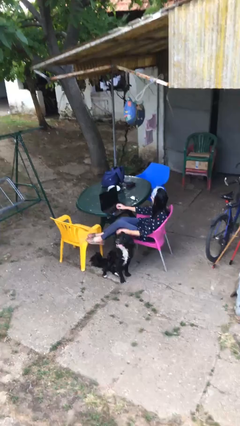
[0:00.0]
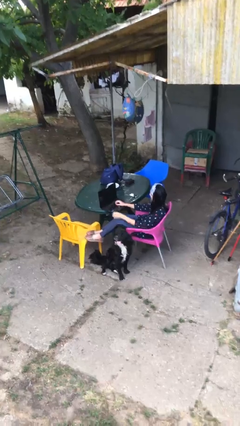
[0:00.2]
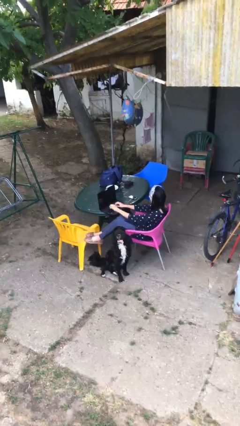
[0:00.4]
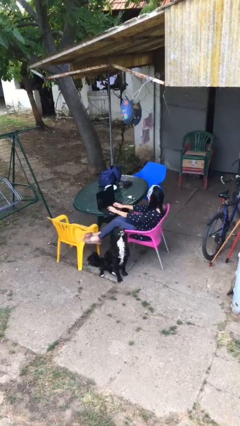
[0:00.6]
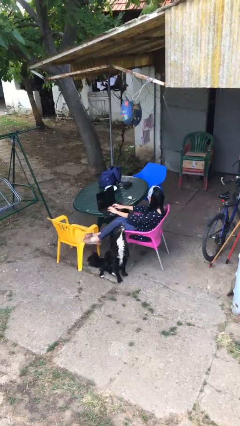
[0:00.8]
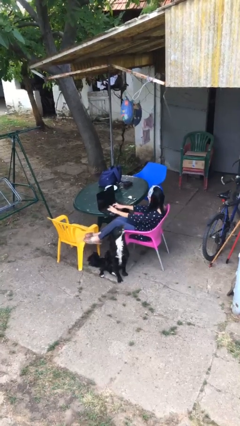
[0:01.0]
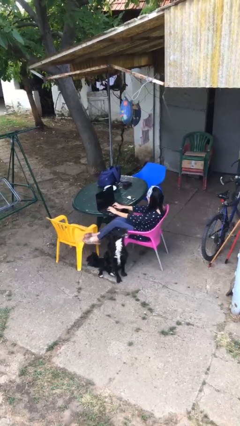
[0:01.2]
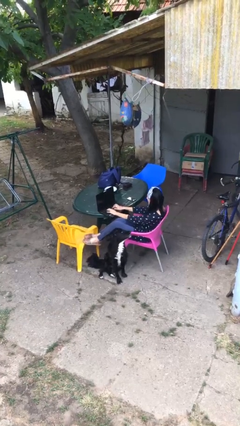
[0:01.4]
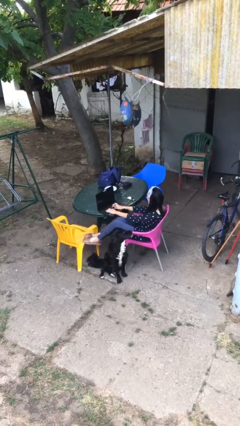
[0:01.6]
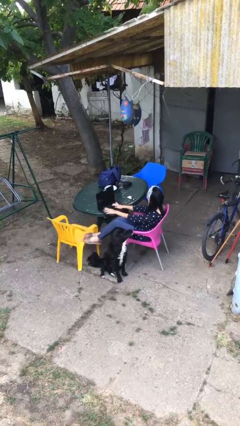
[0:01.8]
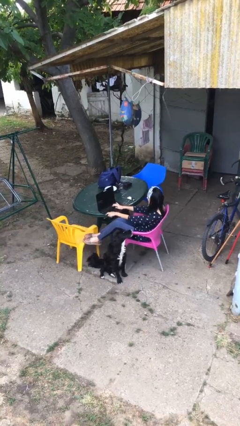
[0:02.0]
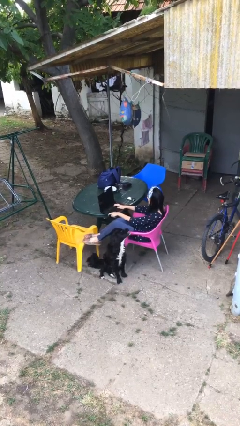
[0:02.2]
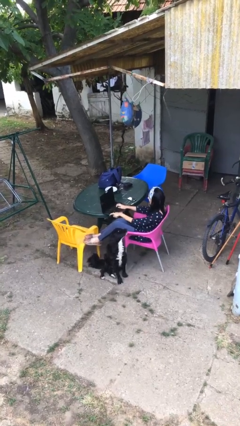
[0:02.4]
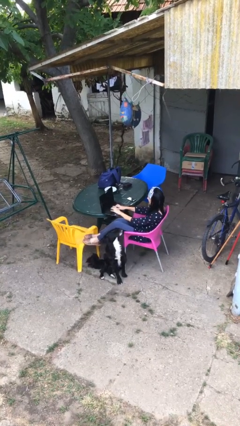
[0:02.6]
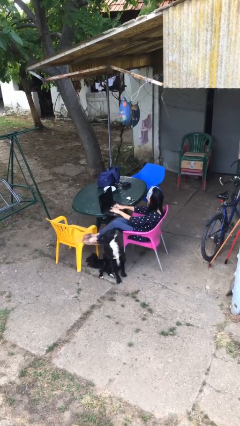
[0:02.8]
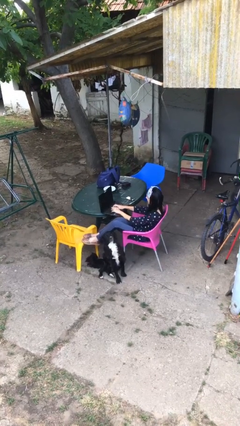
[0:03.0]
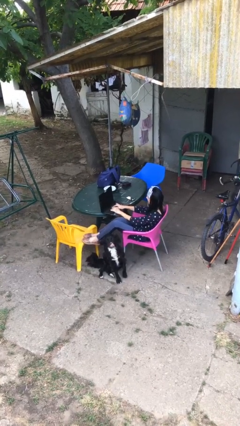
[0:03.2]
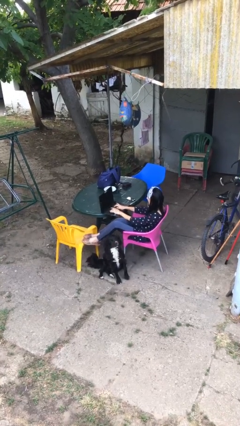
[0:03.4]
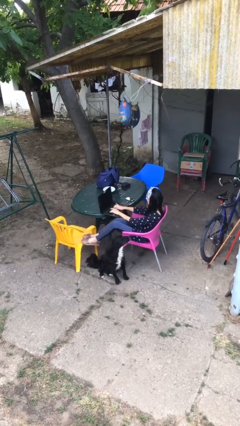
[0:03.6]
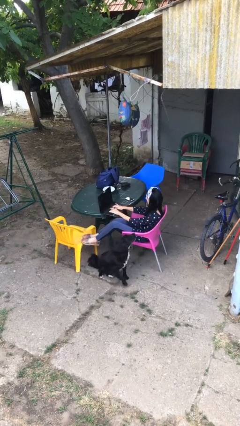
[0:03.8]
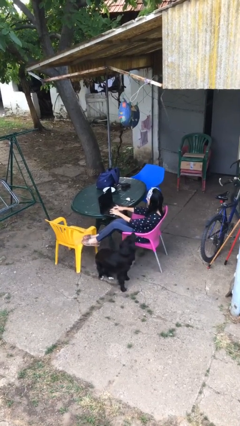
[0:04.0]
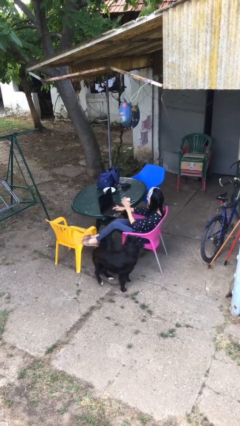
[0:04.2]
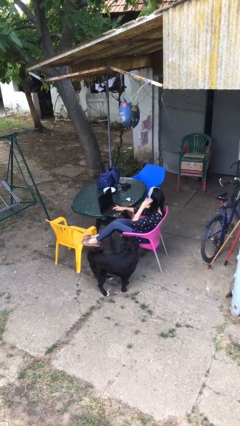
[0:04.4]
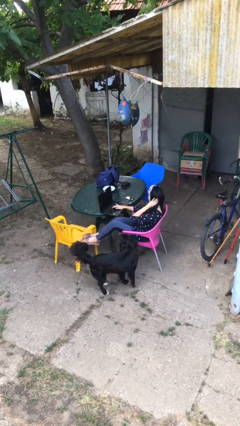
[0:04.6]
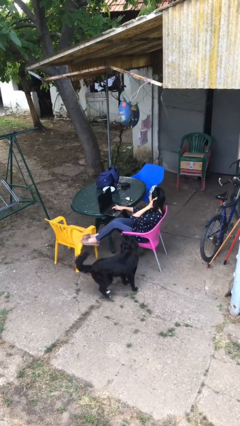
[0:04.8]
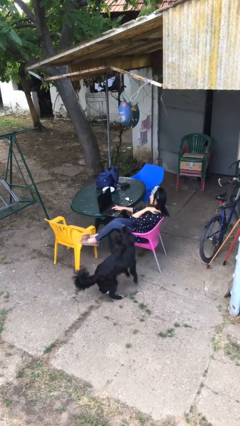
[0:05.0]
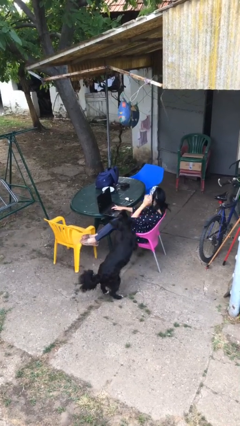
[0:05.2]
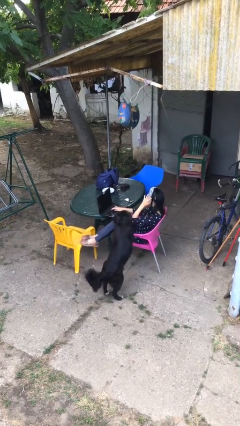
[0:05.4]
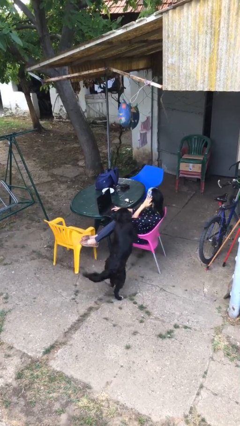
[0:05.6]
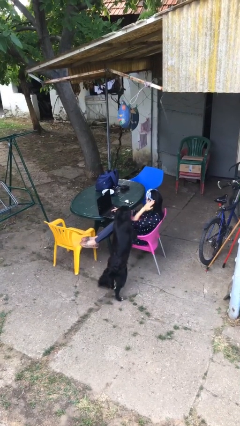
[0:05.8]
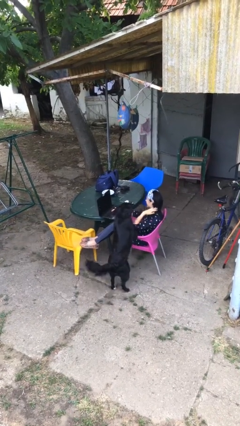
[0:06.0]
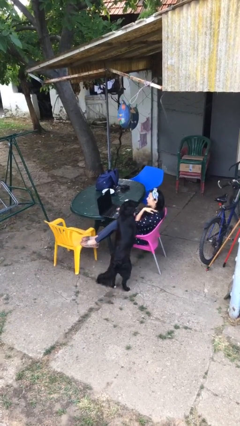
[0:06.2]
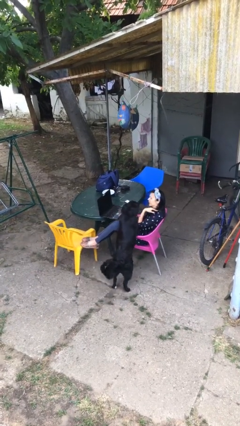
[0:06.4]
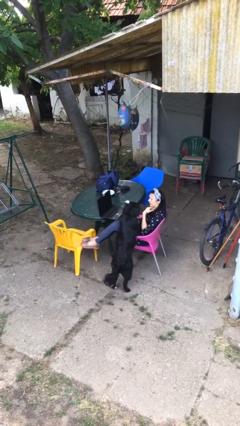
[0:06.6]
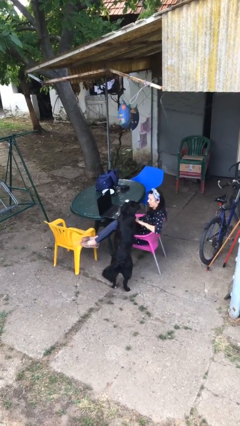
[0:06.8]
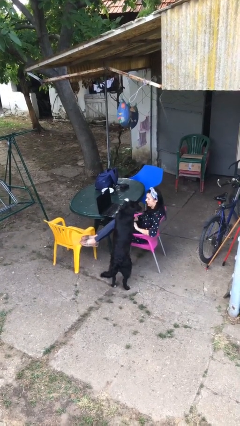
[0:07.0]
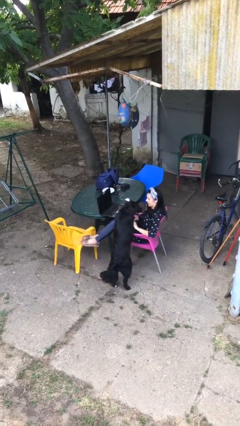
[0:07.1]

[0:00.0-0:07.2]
person interacts with laptop

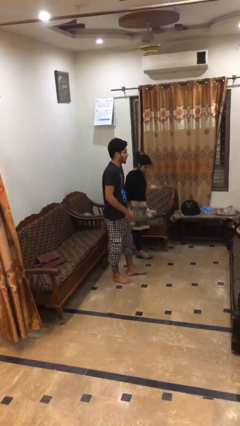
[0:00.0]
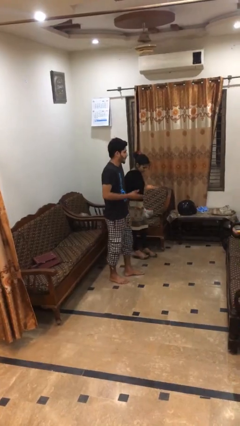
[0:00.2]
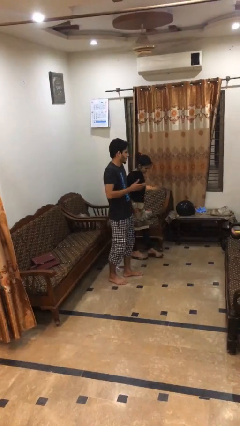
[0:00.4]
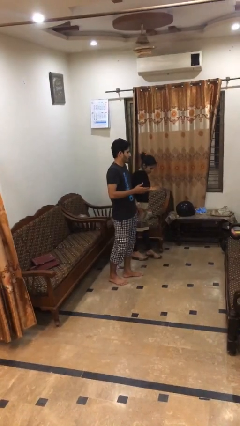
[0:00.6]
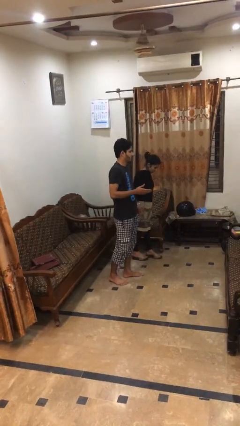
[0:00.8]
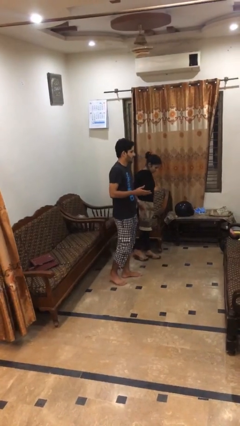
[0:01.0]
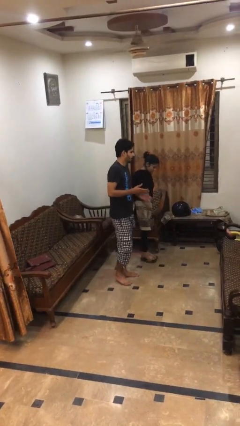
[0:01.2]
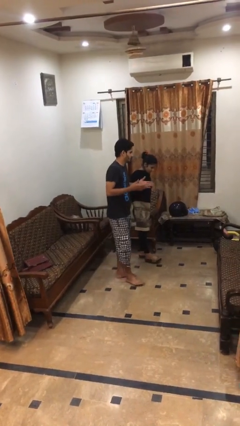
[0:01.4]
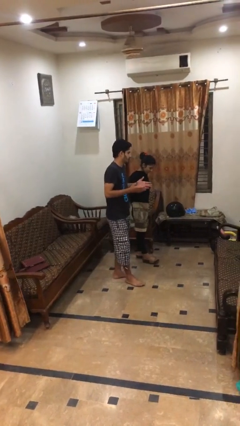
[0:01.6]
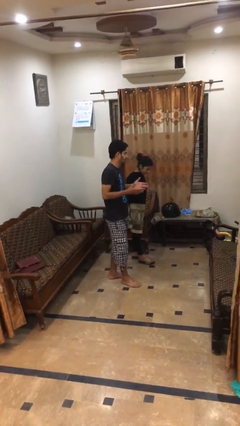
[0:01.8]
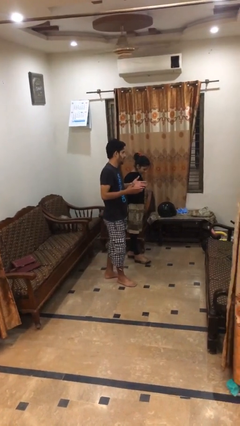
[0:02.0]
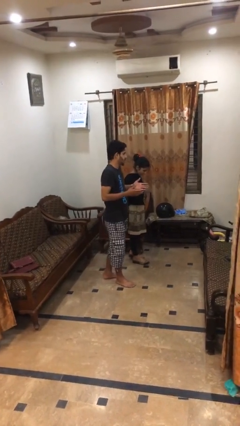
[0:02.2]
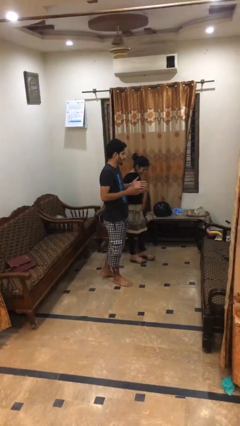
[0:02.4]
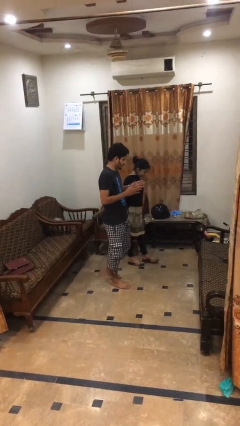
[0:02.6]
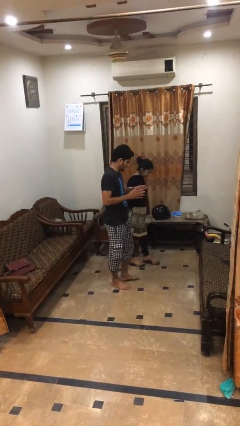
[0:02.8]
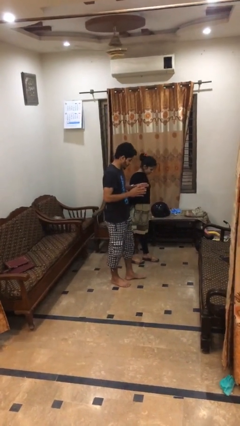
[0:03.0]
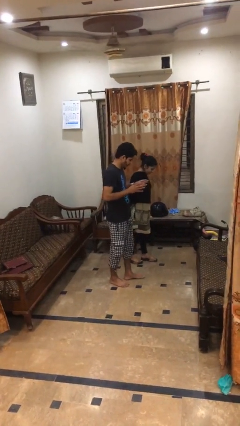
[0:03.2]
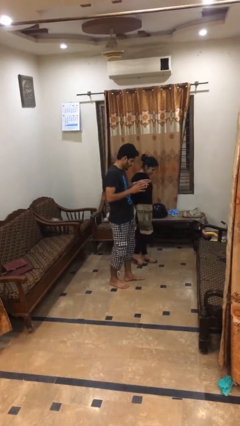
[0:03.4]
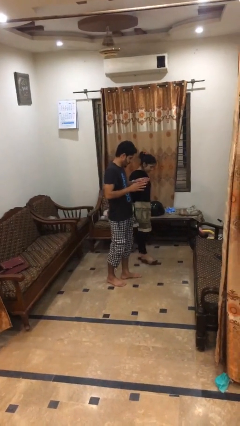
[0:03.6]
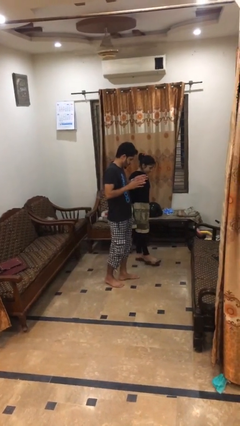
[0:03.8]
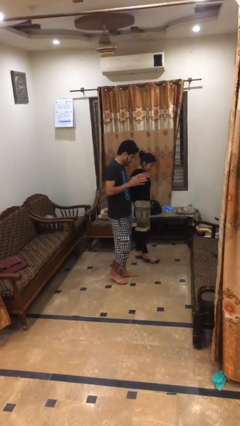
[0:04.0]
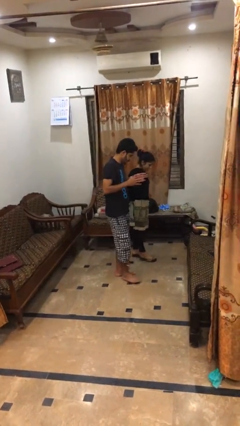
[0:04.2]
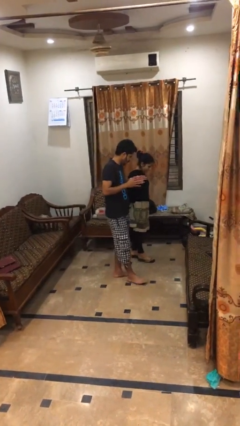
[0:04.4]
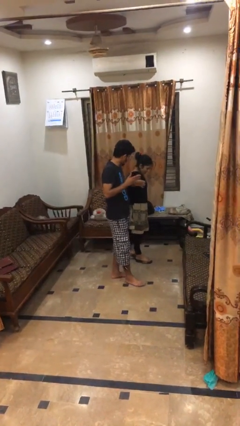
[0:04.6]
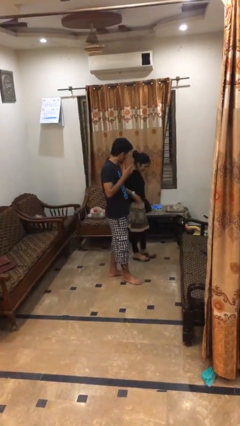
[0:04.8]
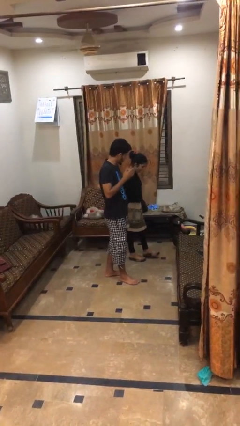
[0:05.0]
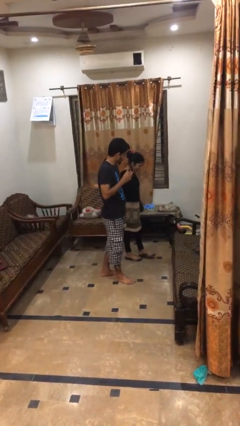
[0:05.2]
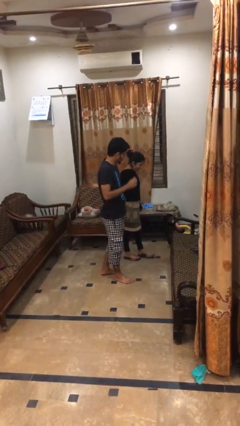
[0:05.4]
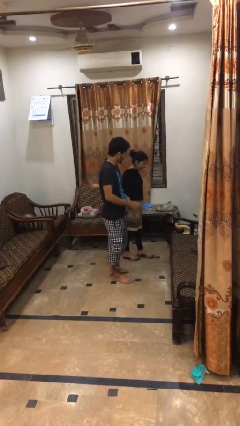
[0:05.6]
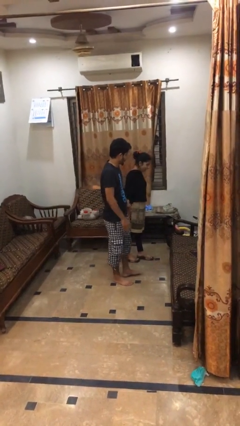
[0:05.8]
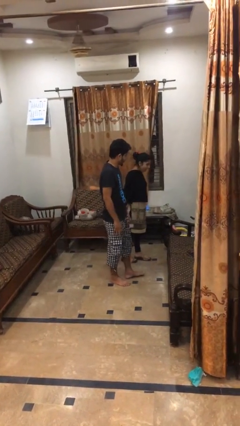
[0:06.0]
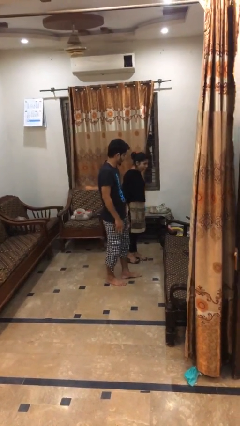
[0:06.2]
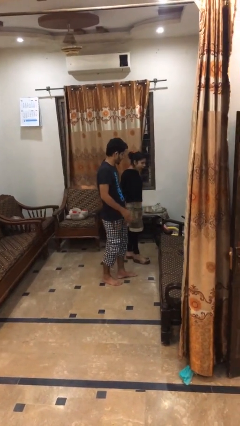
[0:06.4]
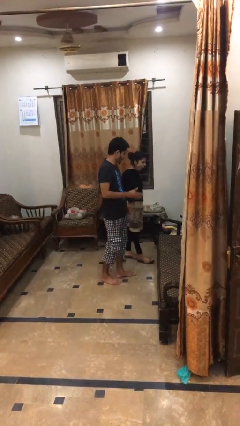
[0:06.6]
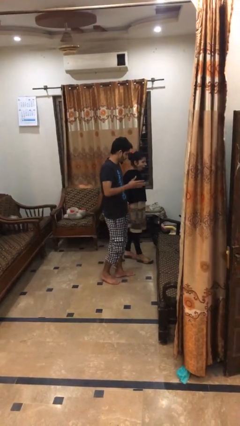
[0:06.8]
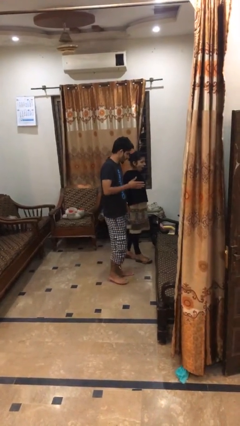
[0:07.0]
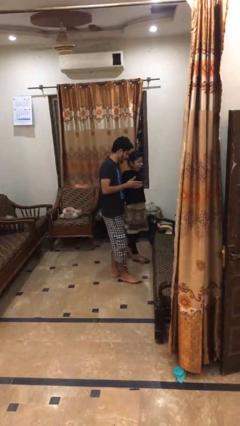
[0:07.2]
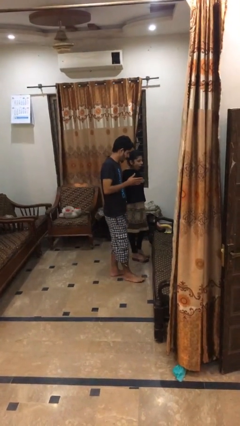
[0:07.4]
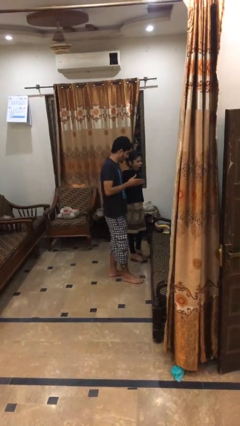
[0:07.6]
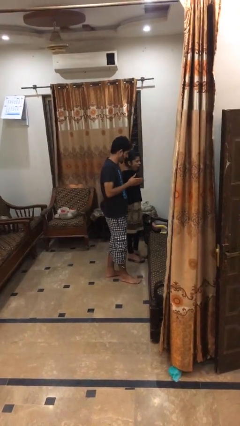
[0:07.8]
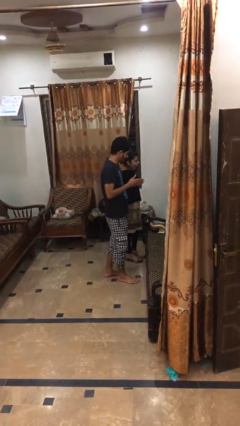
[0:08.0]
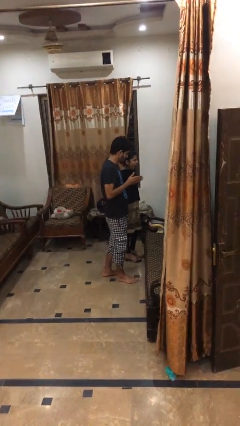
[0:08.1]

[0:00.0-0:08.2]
person talks to person

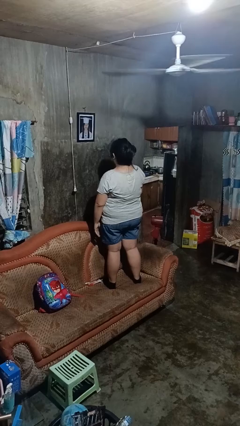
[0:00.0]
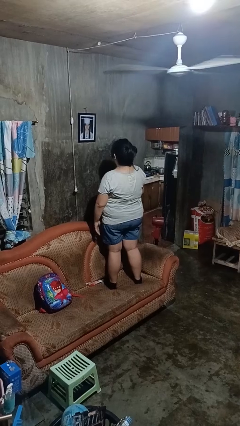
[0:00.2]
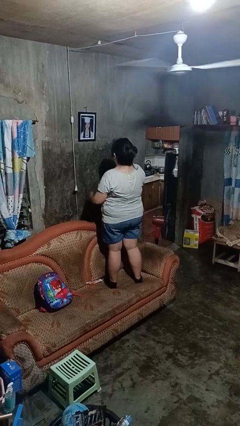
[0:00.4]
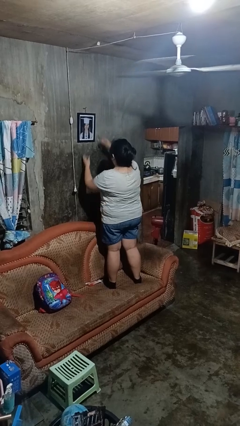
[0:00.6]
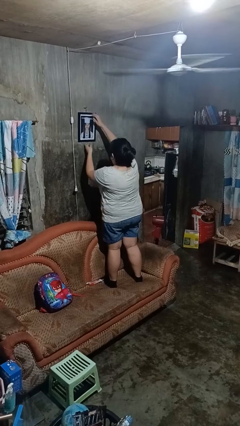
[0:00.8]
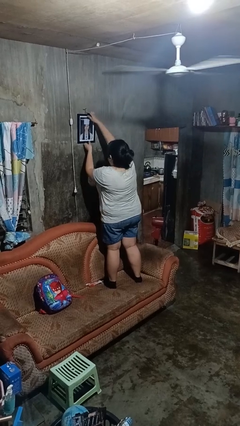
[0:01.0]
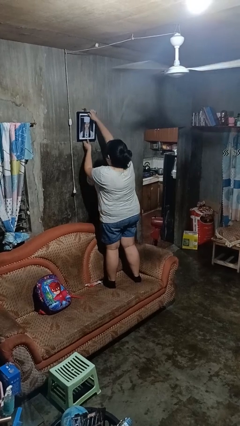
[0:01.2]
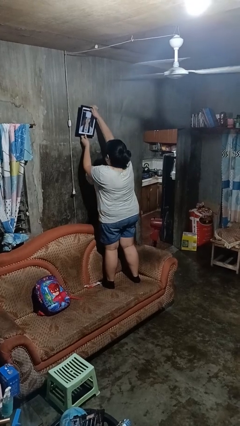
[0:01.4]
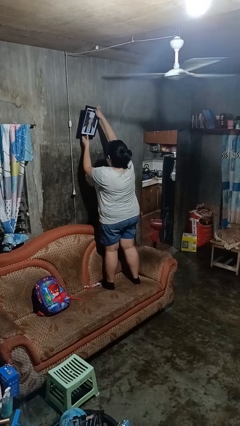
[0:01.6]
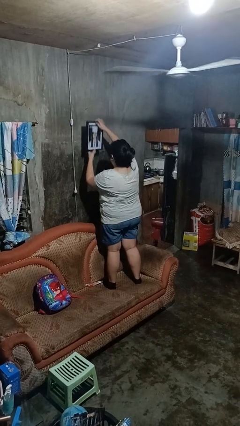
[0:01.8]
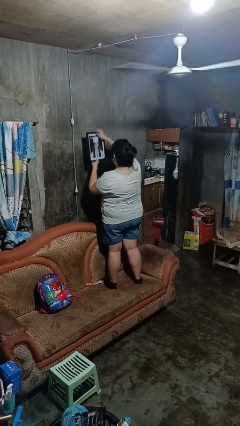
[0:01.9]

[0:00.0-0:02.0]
person takes down picture frame

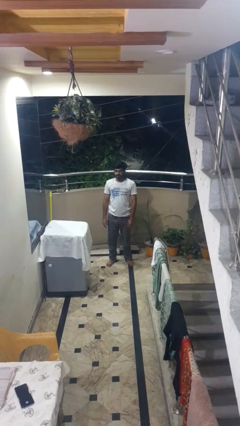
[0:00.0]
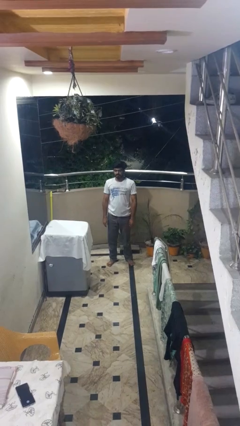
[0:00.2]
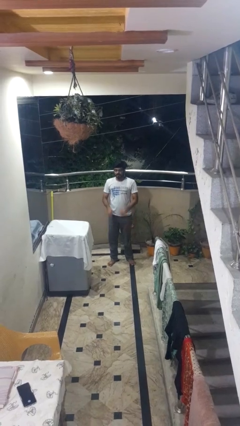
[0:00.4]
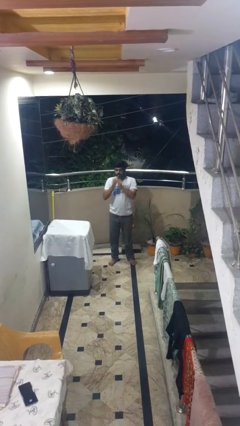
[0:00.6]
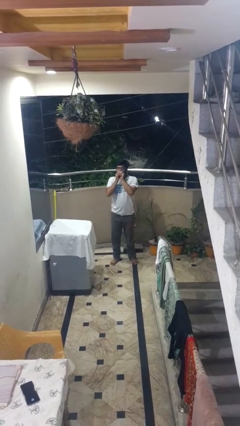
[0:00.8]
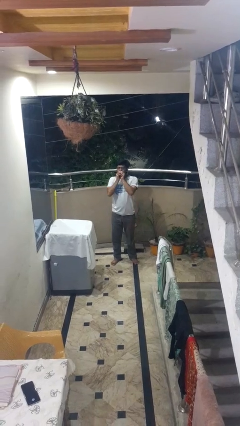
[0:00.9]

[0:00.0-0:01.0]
person blows into hands
